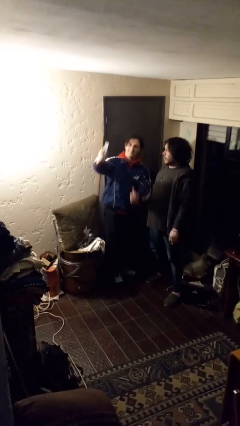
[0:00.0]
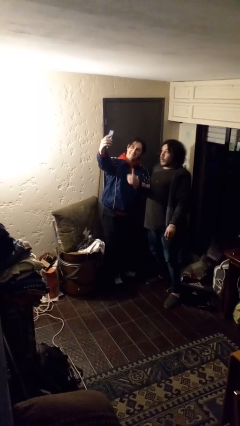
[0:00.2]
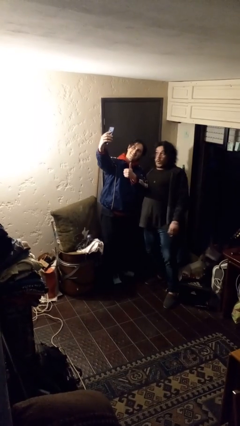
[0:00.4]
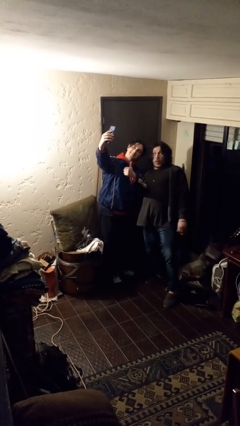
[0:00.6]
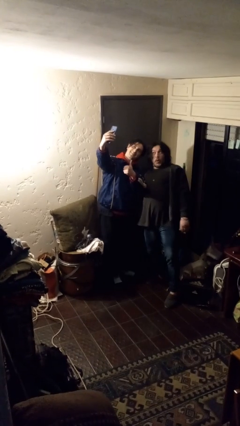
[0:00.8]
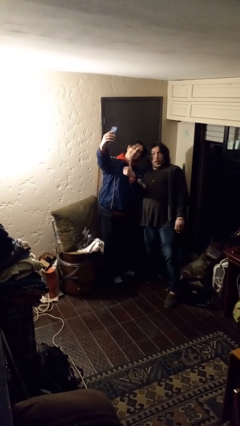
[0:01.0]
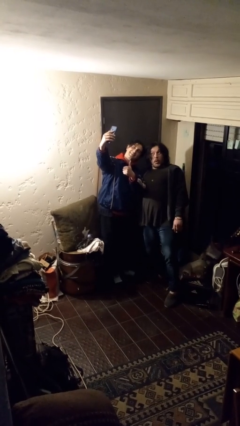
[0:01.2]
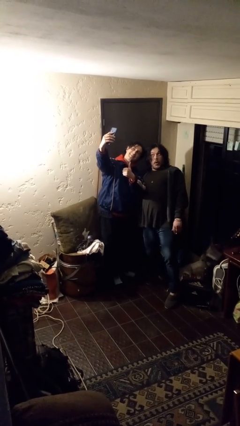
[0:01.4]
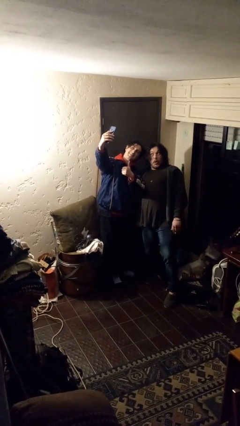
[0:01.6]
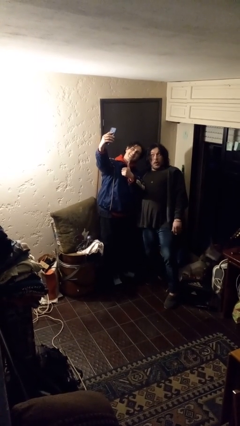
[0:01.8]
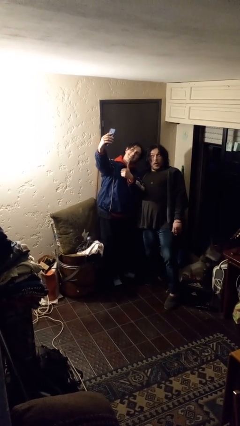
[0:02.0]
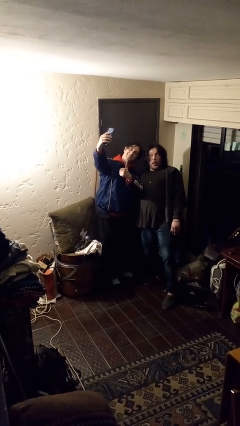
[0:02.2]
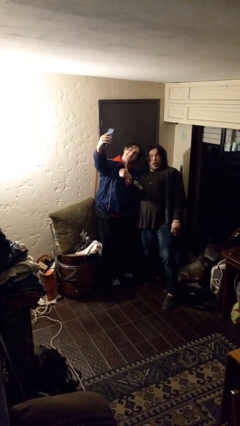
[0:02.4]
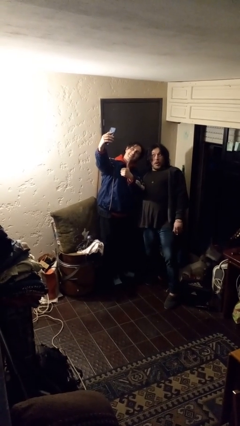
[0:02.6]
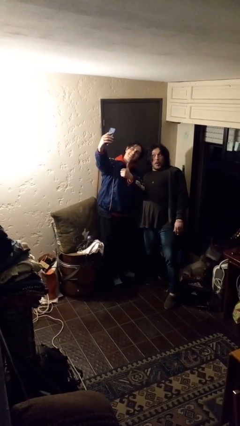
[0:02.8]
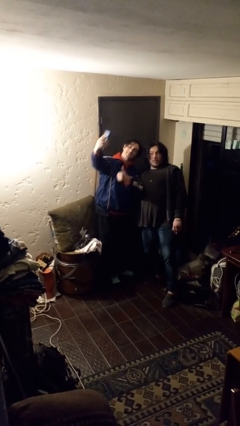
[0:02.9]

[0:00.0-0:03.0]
person takes selfie with person

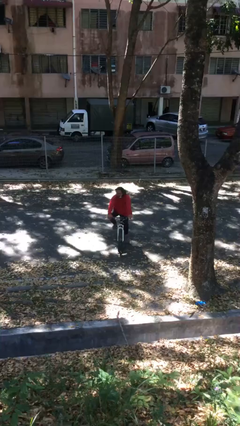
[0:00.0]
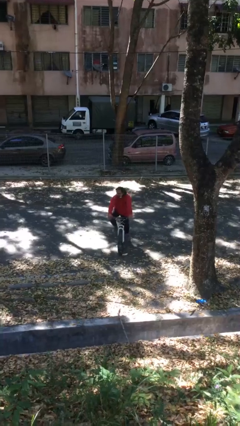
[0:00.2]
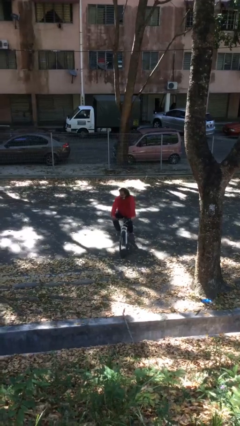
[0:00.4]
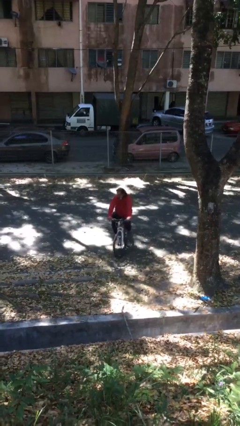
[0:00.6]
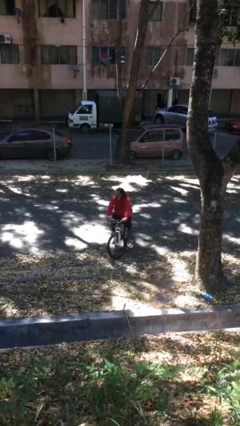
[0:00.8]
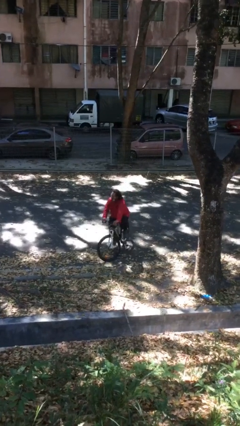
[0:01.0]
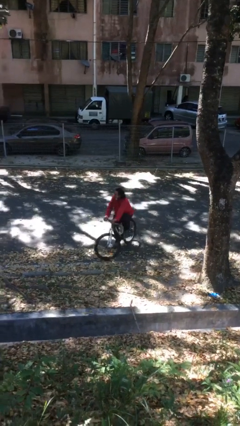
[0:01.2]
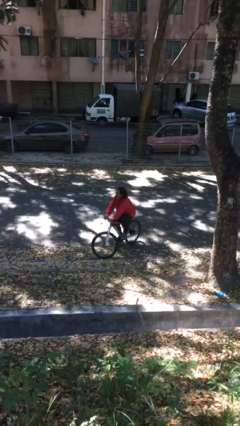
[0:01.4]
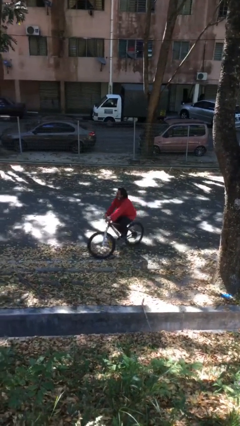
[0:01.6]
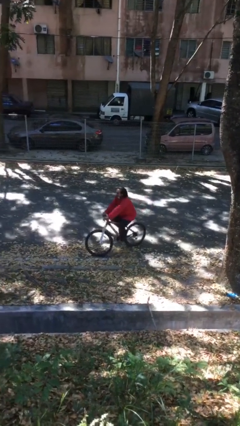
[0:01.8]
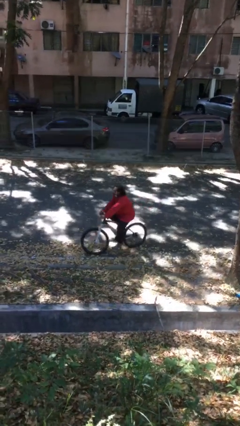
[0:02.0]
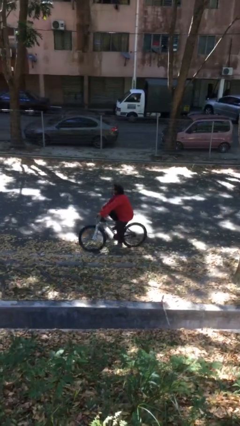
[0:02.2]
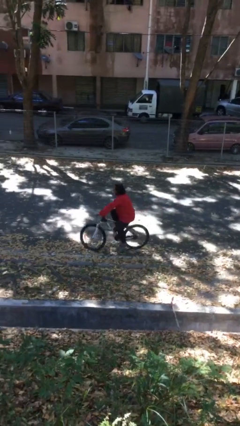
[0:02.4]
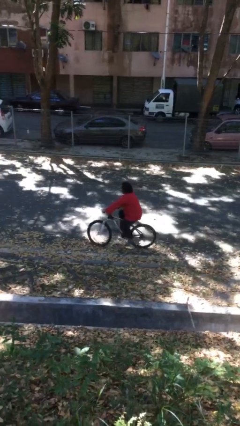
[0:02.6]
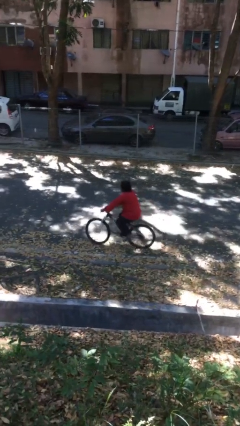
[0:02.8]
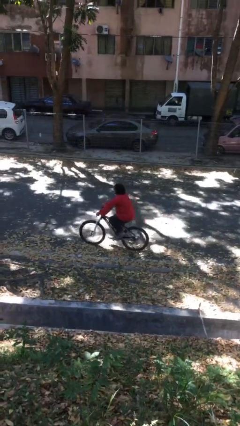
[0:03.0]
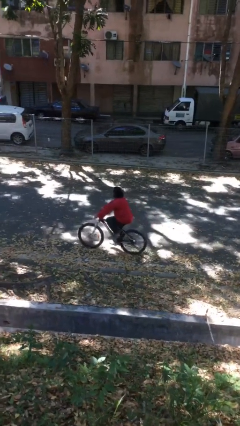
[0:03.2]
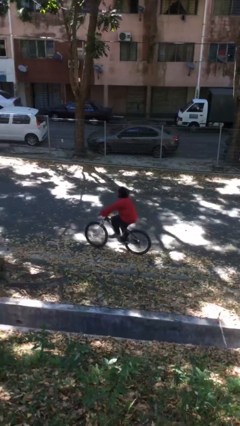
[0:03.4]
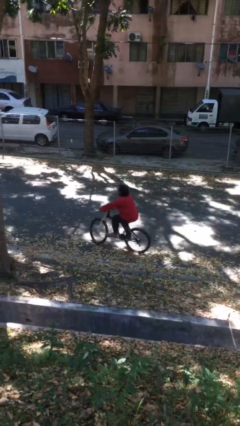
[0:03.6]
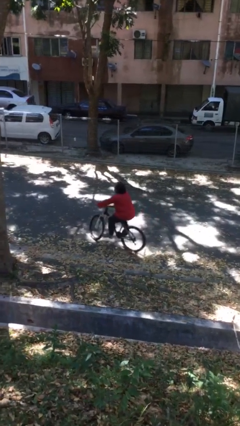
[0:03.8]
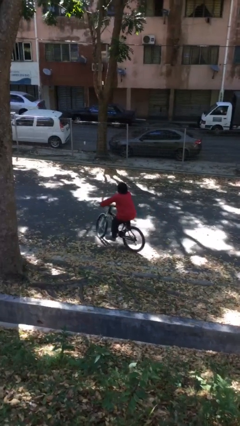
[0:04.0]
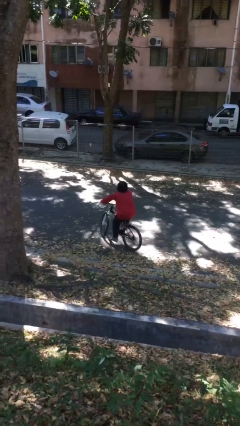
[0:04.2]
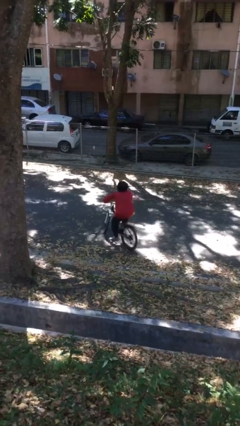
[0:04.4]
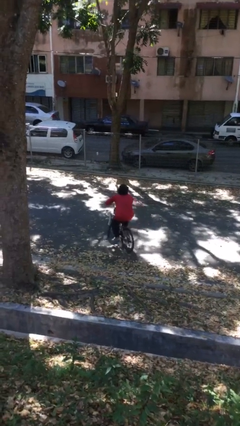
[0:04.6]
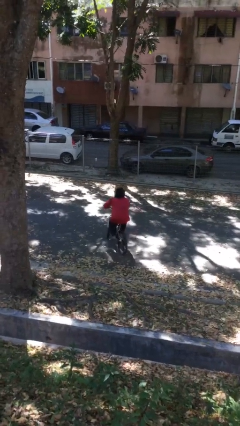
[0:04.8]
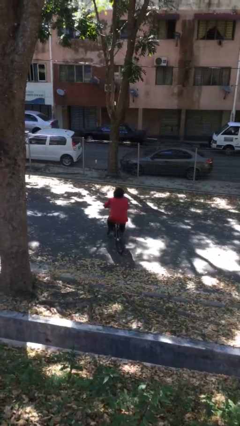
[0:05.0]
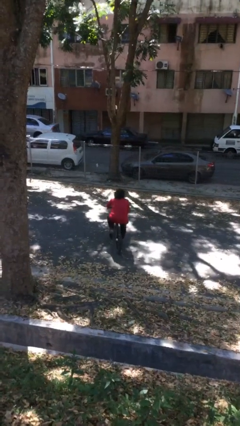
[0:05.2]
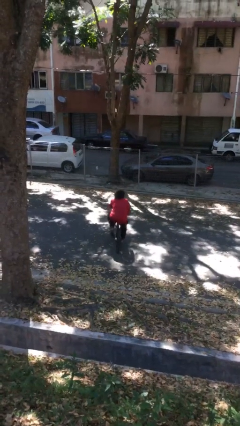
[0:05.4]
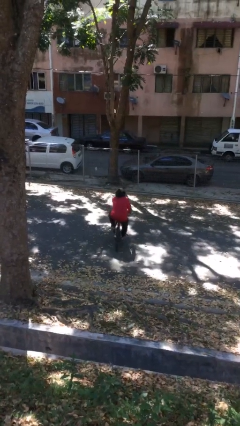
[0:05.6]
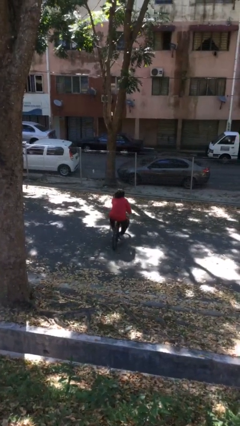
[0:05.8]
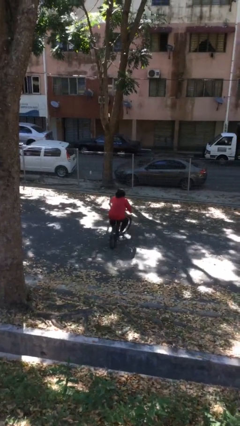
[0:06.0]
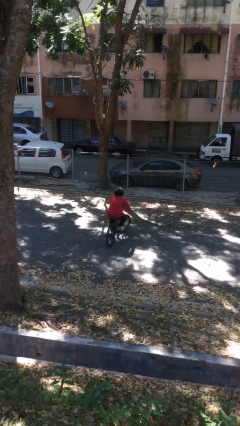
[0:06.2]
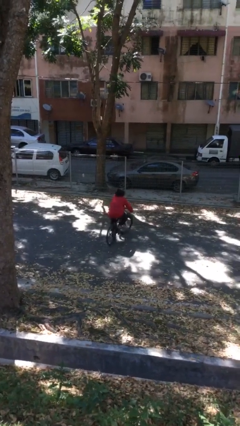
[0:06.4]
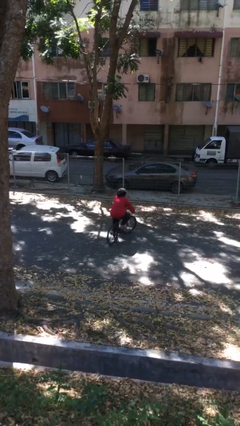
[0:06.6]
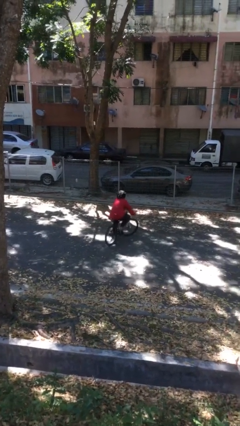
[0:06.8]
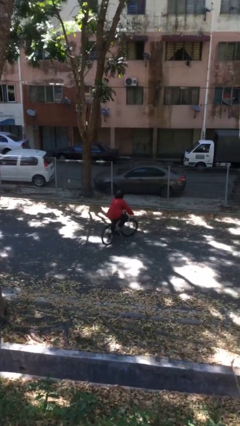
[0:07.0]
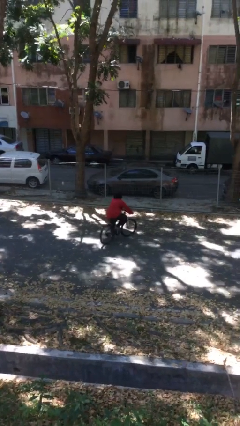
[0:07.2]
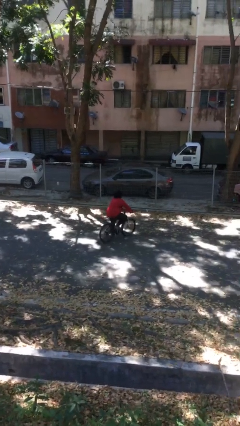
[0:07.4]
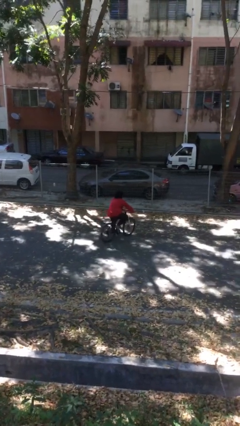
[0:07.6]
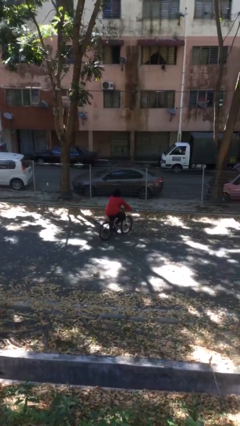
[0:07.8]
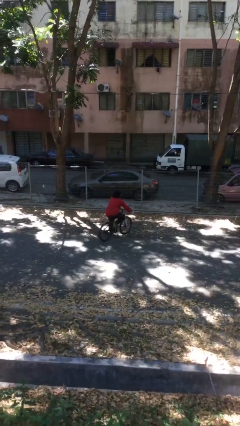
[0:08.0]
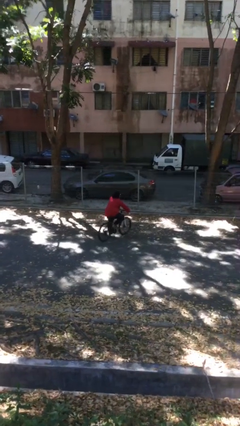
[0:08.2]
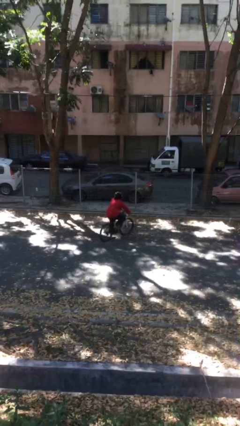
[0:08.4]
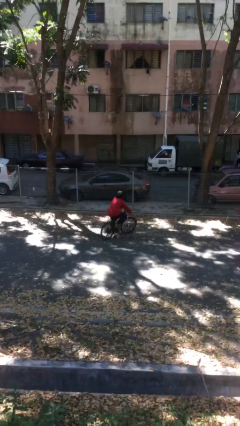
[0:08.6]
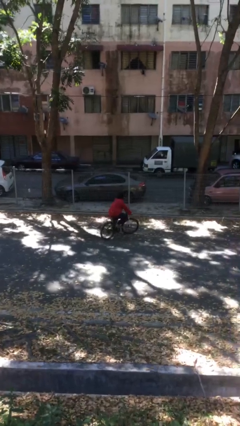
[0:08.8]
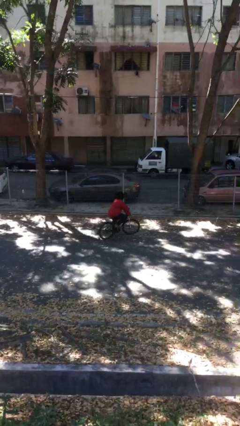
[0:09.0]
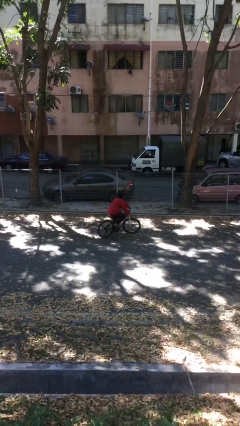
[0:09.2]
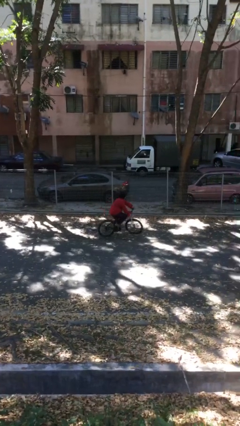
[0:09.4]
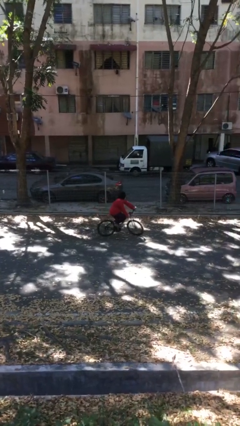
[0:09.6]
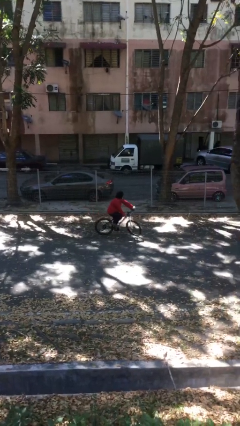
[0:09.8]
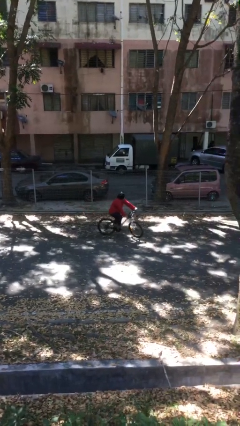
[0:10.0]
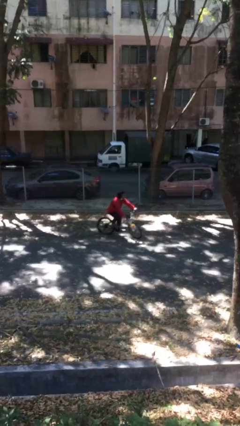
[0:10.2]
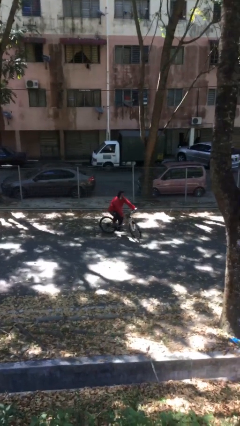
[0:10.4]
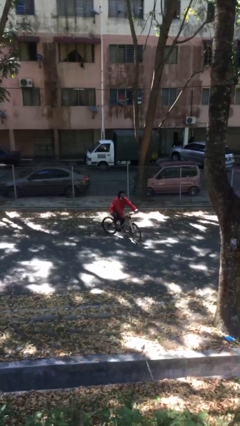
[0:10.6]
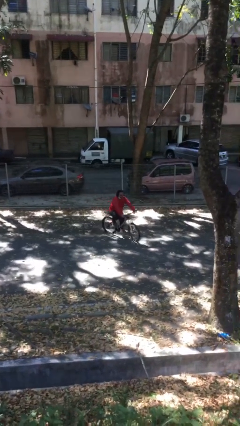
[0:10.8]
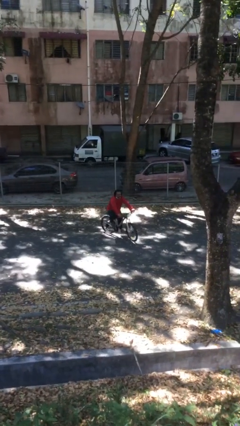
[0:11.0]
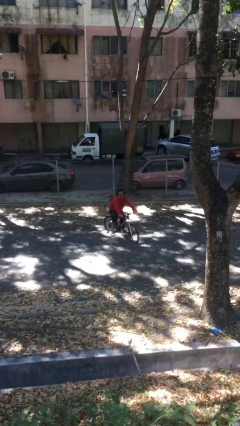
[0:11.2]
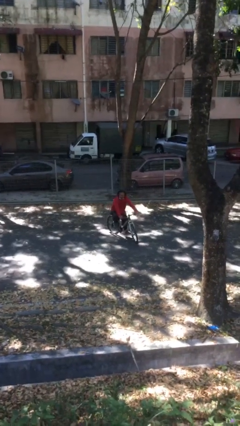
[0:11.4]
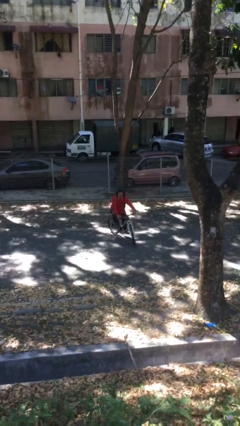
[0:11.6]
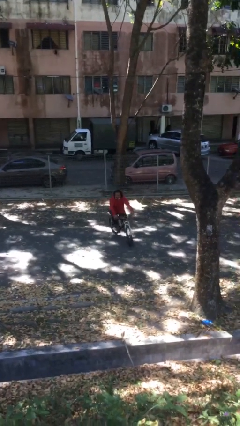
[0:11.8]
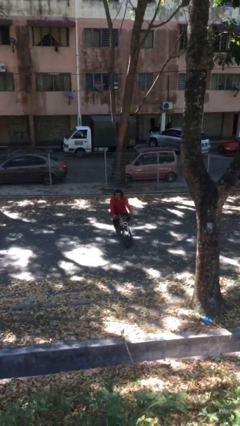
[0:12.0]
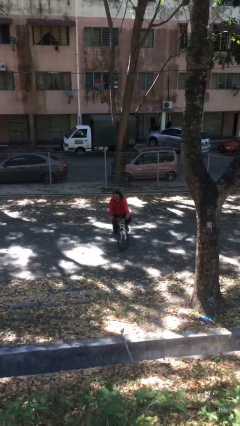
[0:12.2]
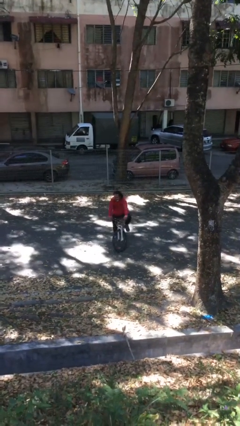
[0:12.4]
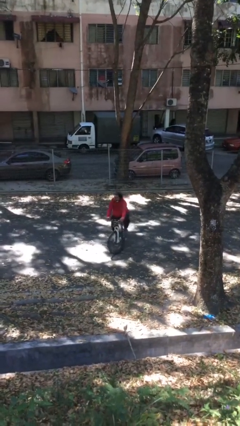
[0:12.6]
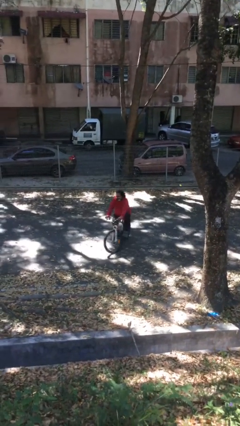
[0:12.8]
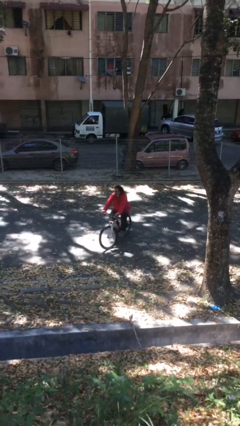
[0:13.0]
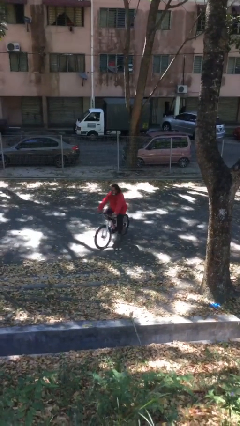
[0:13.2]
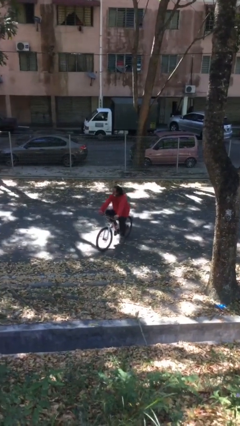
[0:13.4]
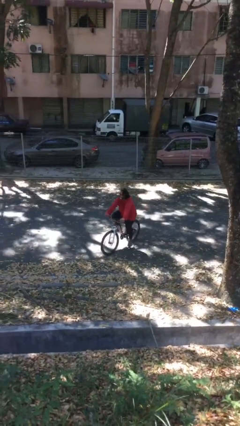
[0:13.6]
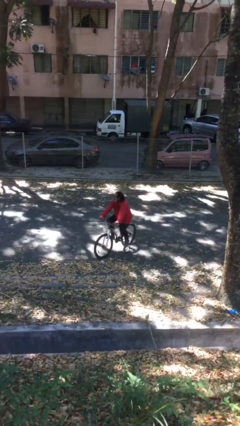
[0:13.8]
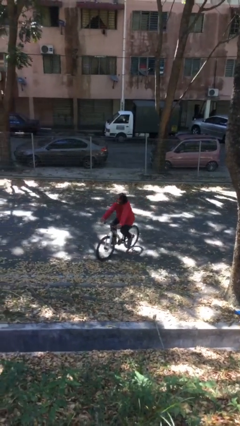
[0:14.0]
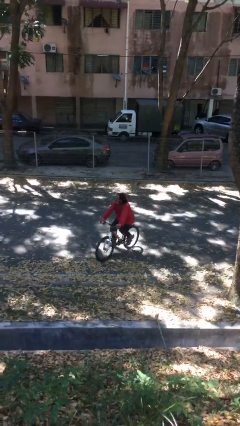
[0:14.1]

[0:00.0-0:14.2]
person rides bicycle

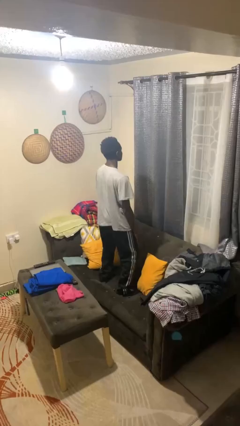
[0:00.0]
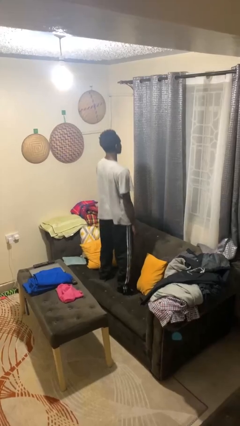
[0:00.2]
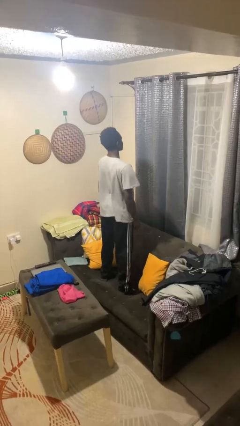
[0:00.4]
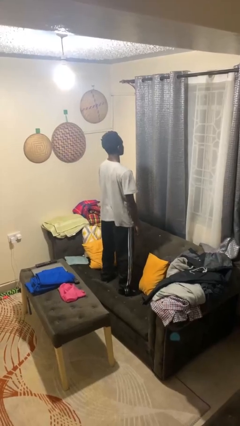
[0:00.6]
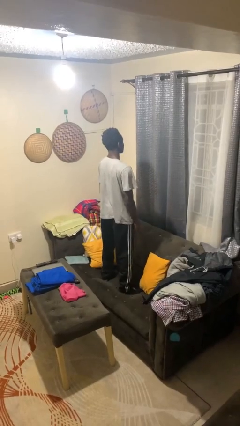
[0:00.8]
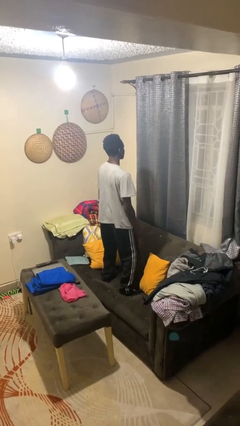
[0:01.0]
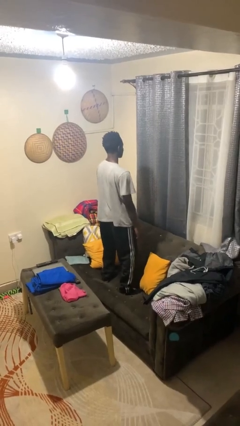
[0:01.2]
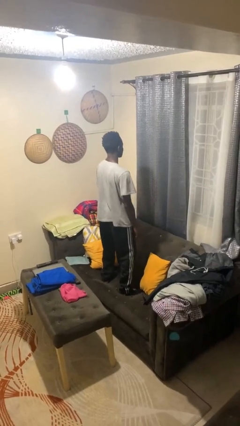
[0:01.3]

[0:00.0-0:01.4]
person jumps on couch
